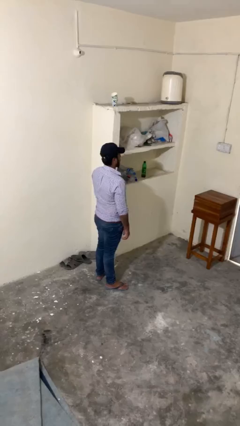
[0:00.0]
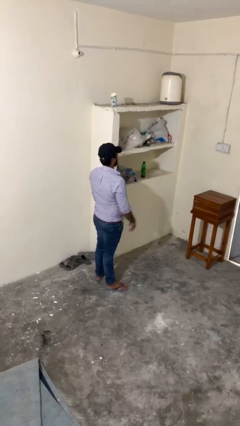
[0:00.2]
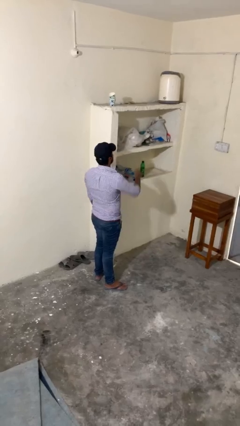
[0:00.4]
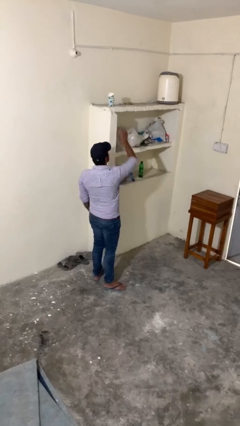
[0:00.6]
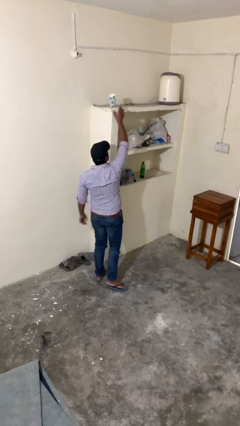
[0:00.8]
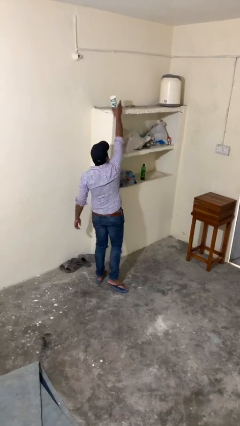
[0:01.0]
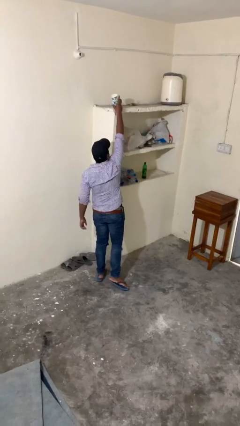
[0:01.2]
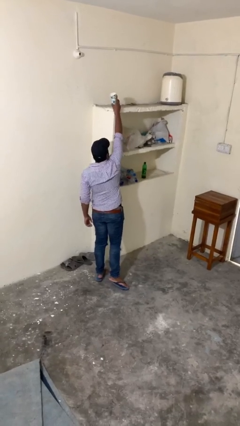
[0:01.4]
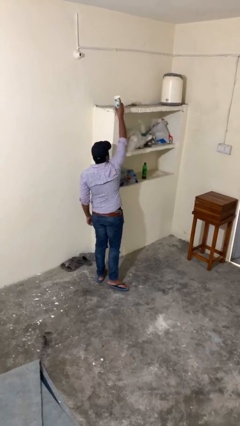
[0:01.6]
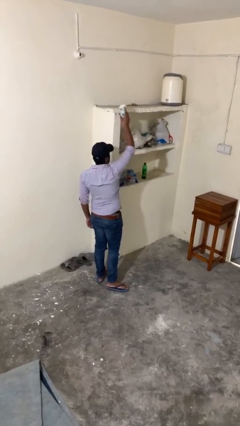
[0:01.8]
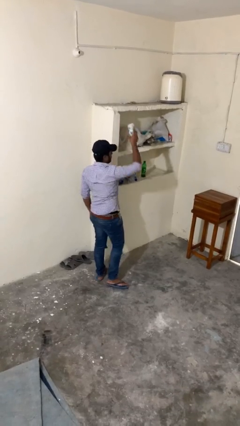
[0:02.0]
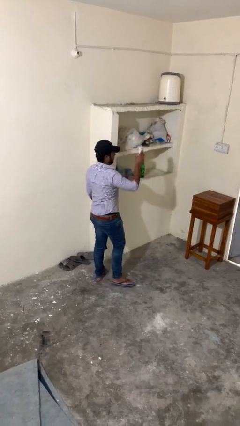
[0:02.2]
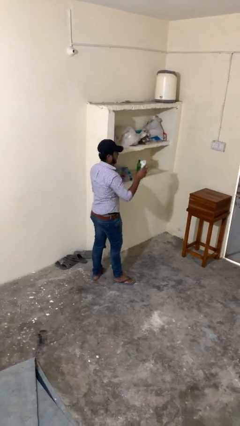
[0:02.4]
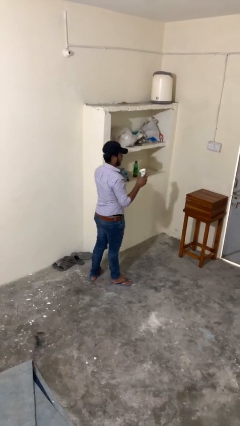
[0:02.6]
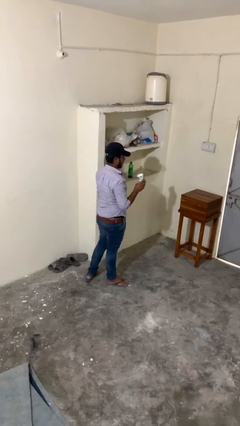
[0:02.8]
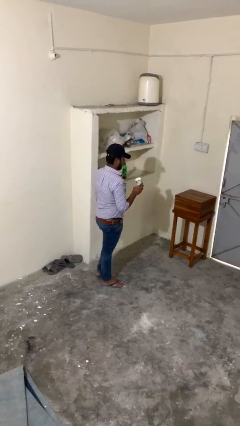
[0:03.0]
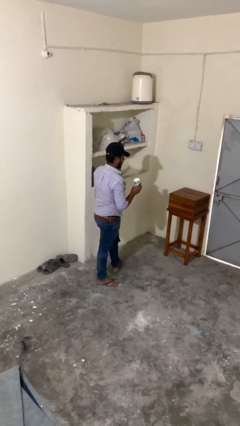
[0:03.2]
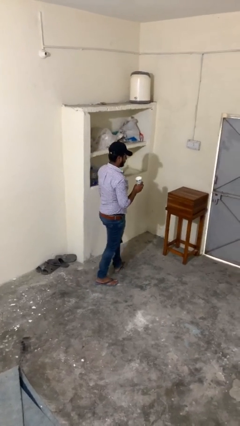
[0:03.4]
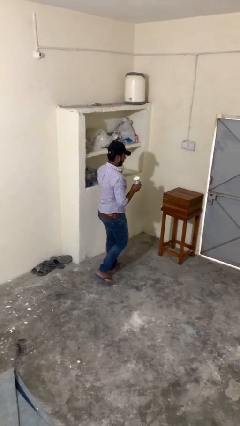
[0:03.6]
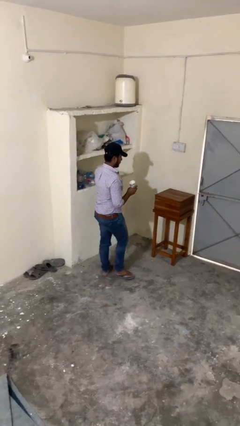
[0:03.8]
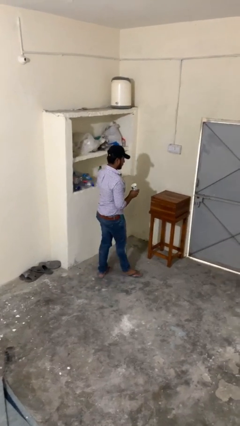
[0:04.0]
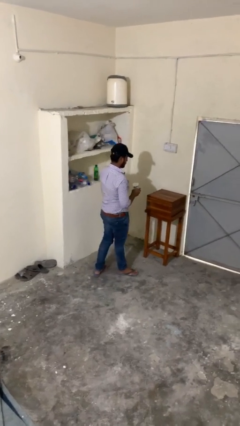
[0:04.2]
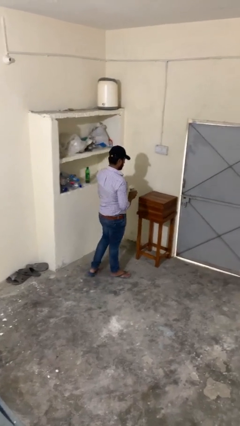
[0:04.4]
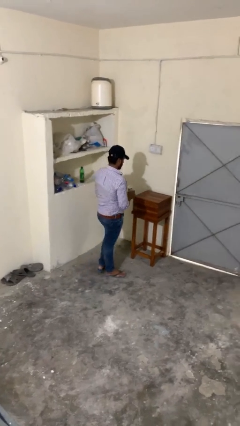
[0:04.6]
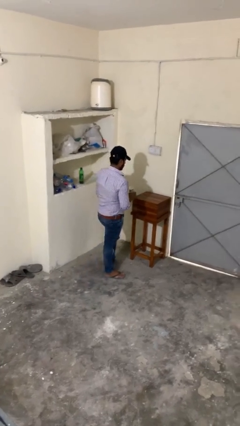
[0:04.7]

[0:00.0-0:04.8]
person picks up object from shelf

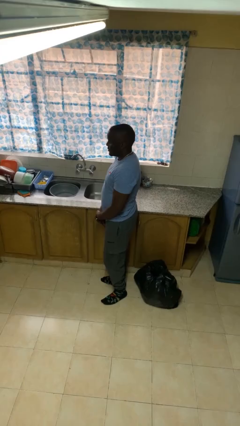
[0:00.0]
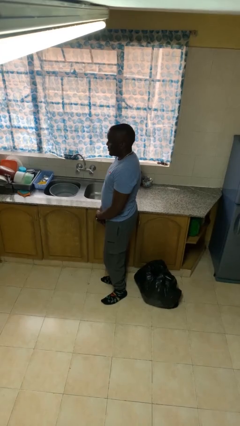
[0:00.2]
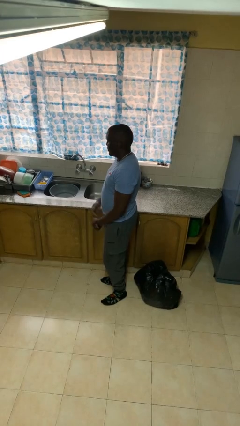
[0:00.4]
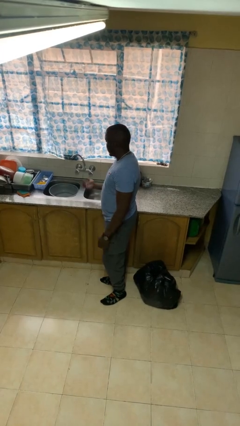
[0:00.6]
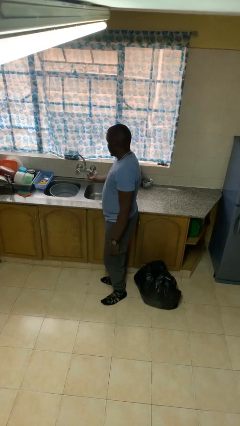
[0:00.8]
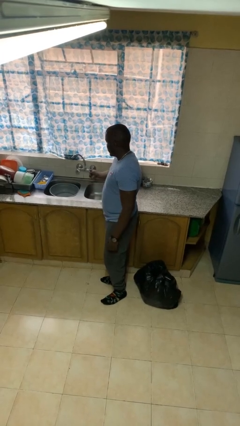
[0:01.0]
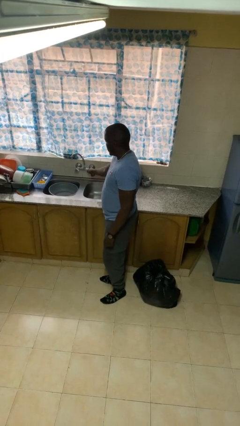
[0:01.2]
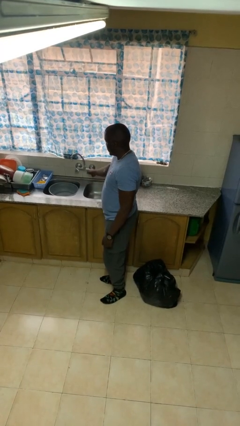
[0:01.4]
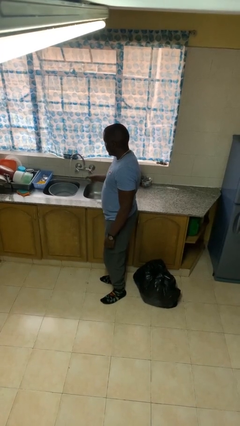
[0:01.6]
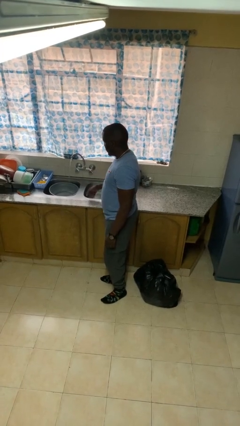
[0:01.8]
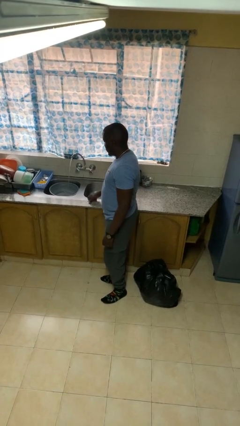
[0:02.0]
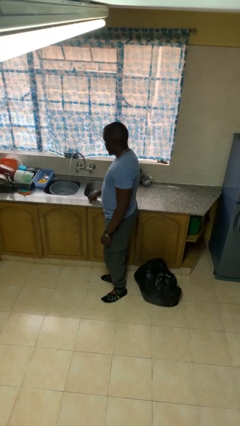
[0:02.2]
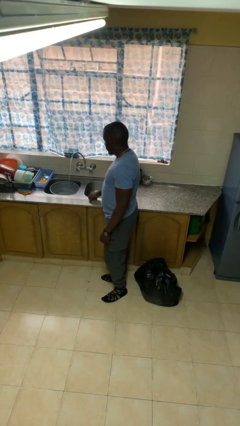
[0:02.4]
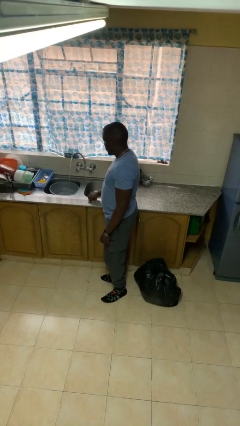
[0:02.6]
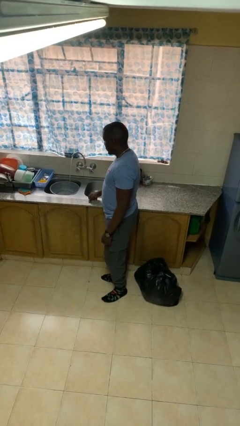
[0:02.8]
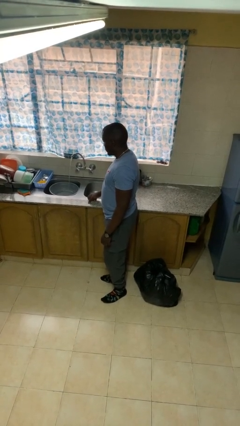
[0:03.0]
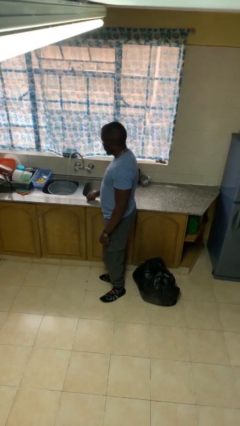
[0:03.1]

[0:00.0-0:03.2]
person turns on faucet

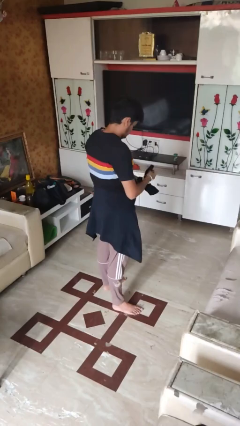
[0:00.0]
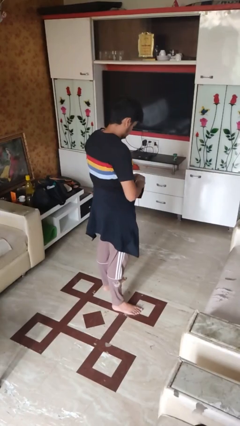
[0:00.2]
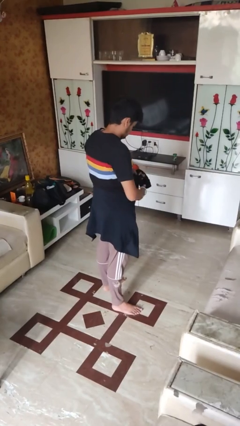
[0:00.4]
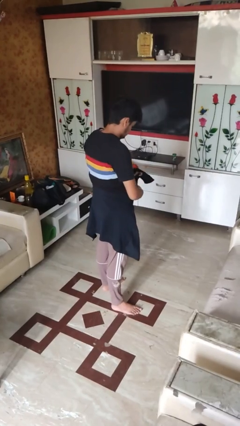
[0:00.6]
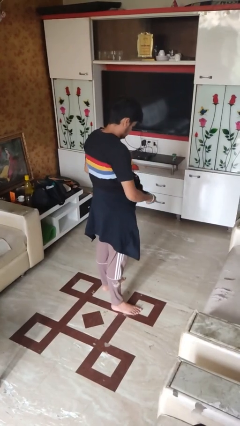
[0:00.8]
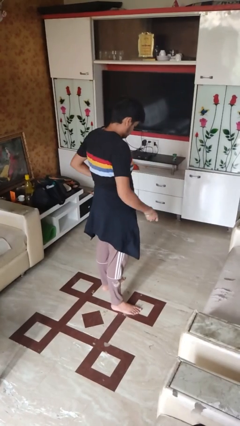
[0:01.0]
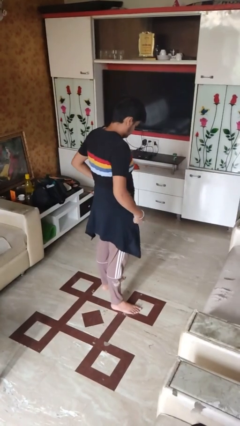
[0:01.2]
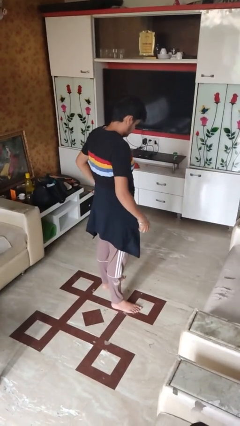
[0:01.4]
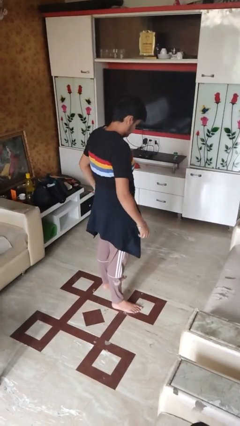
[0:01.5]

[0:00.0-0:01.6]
person ties jacket around waist

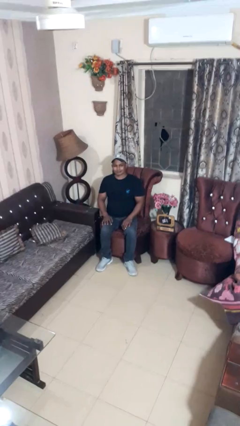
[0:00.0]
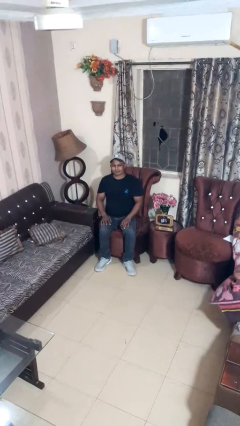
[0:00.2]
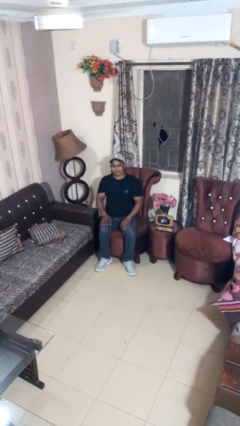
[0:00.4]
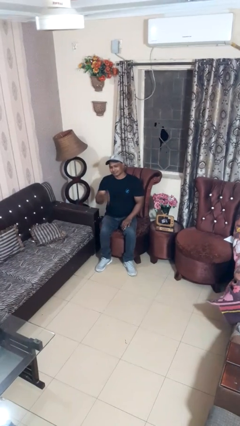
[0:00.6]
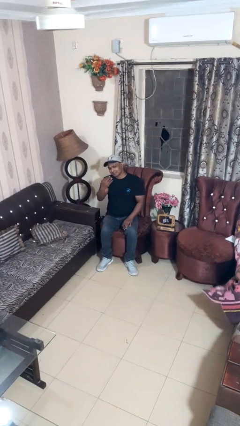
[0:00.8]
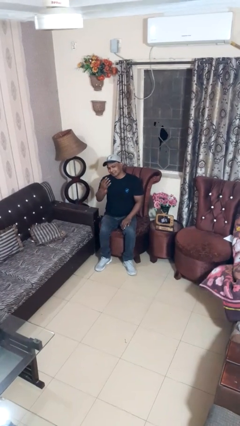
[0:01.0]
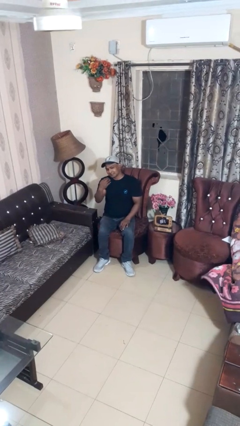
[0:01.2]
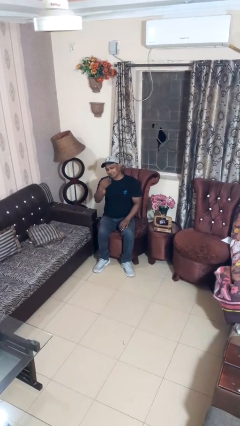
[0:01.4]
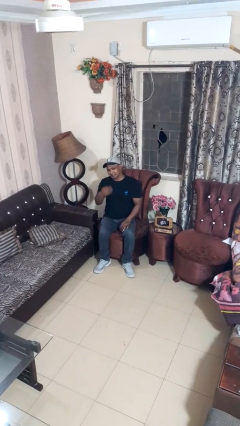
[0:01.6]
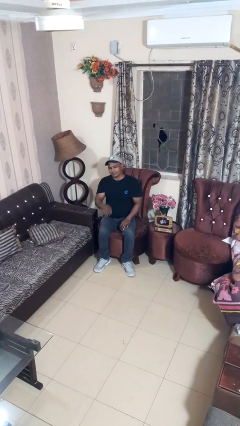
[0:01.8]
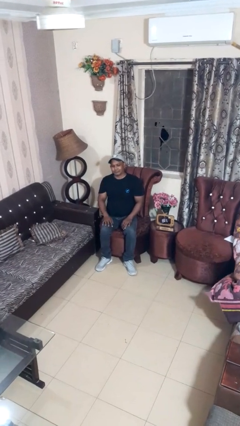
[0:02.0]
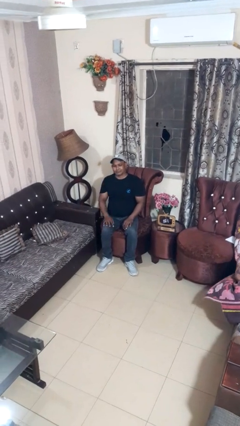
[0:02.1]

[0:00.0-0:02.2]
person gestures come here

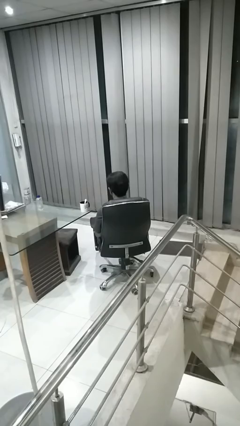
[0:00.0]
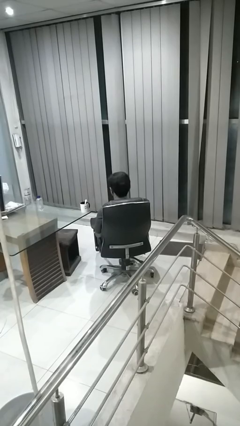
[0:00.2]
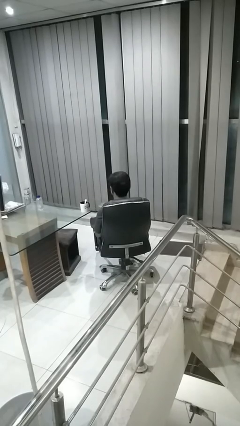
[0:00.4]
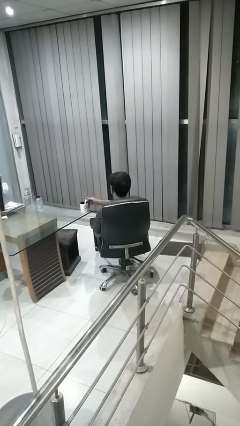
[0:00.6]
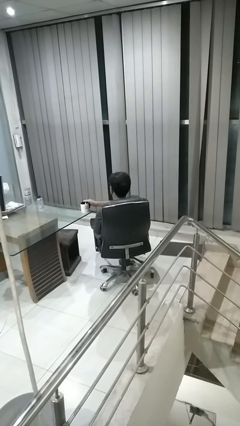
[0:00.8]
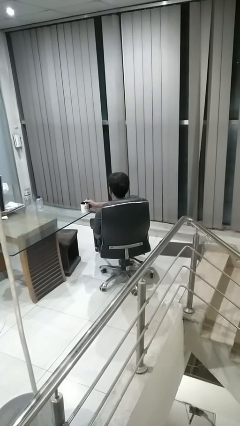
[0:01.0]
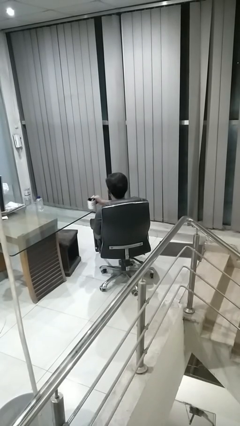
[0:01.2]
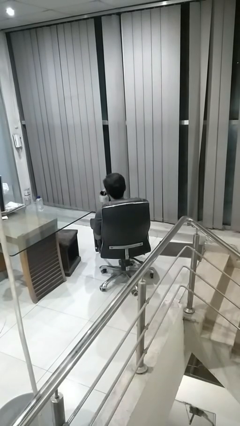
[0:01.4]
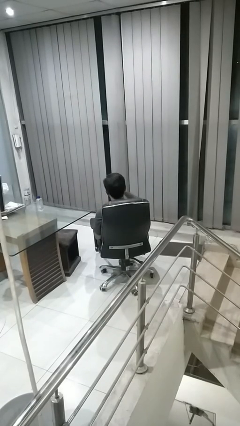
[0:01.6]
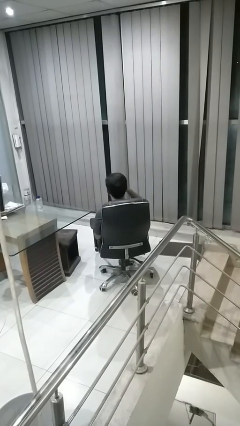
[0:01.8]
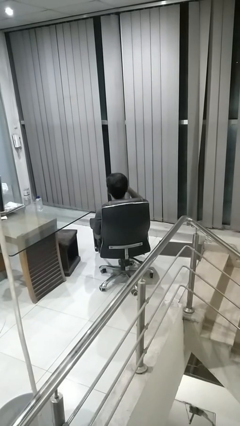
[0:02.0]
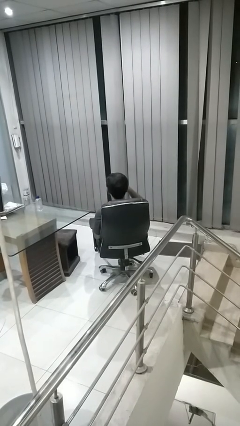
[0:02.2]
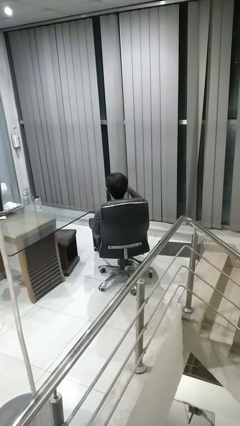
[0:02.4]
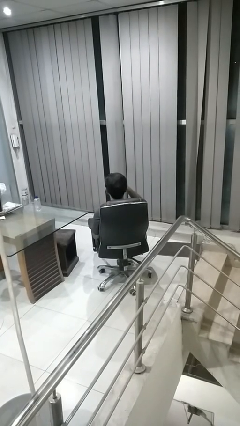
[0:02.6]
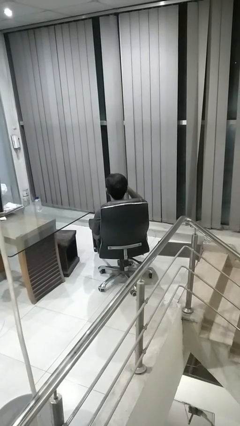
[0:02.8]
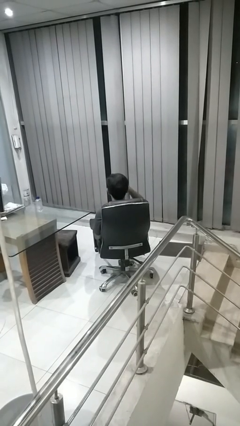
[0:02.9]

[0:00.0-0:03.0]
person drinks from mug

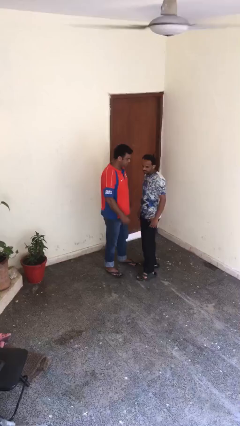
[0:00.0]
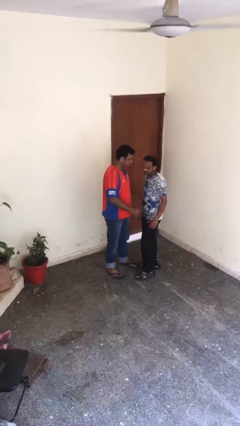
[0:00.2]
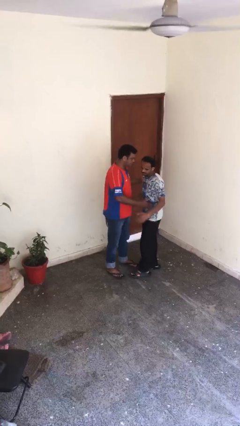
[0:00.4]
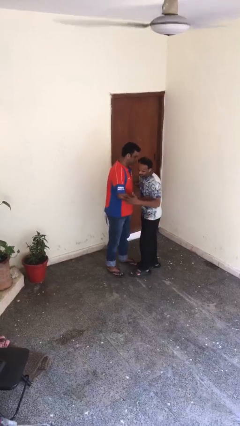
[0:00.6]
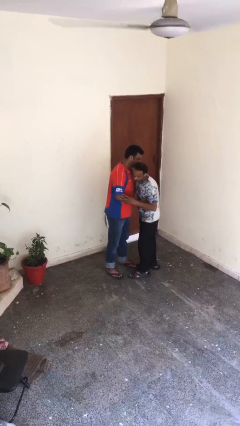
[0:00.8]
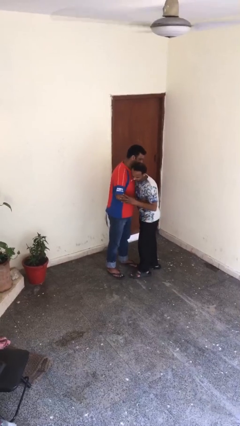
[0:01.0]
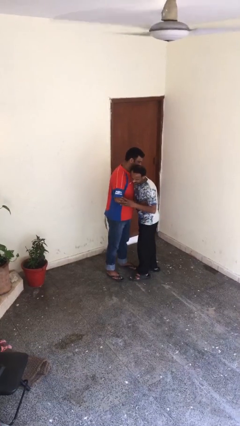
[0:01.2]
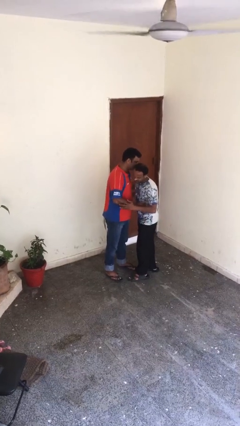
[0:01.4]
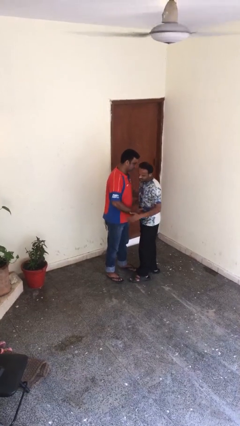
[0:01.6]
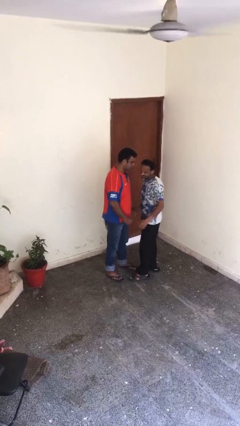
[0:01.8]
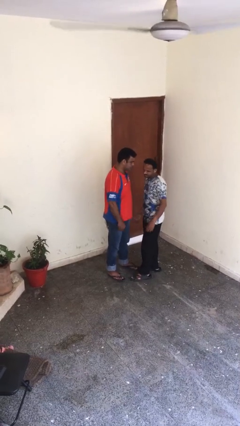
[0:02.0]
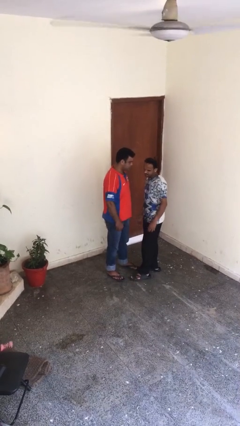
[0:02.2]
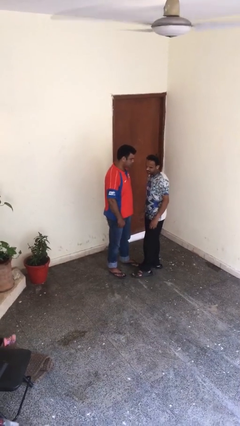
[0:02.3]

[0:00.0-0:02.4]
person embraces person

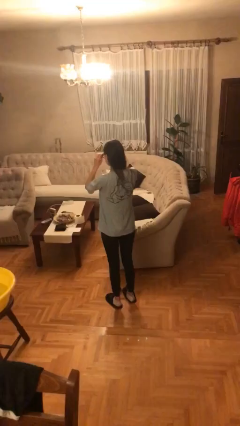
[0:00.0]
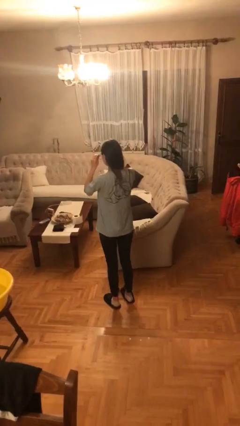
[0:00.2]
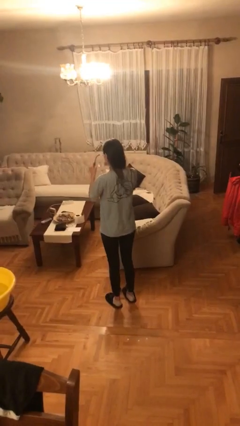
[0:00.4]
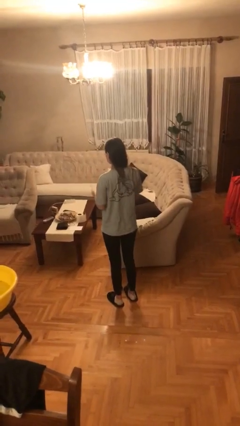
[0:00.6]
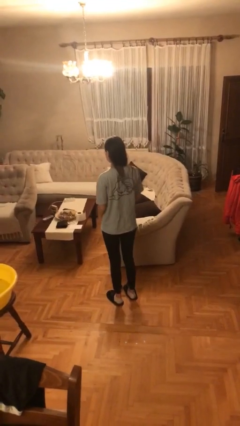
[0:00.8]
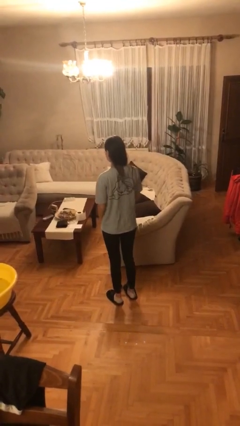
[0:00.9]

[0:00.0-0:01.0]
person takes off glasses
